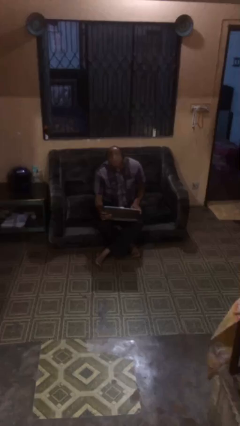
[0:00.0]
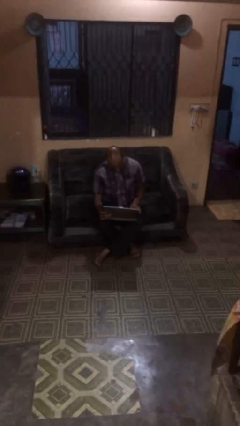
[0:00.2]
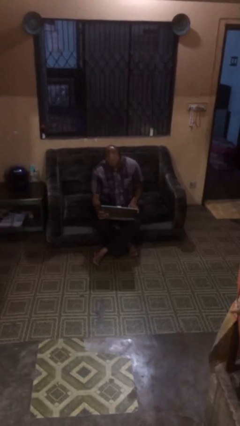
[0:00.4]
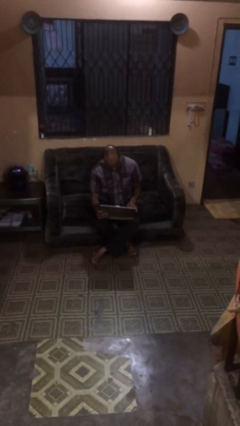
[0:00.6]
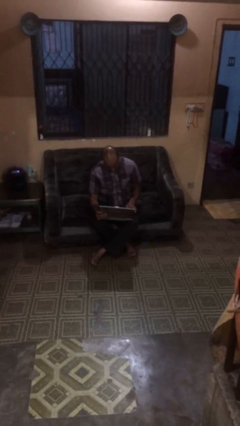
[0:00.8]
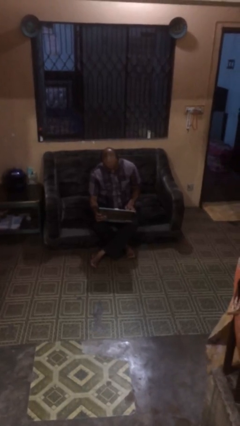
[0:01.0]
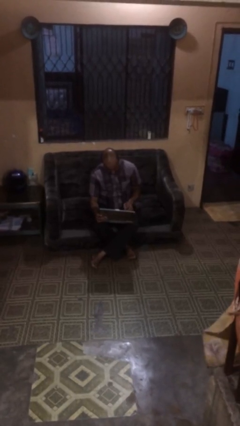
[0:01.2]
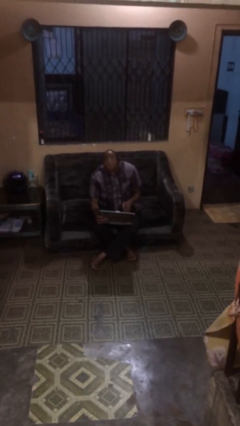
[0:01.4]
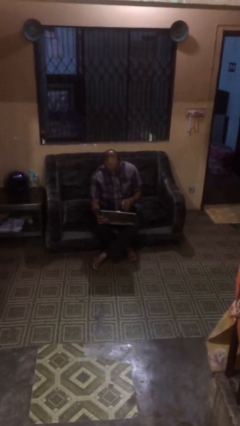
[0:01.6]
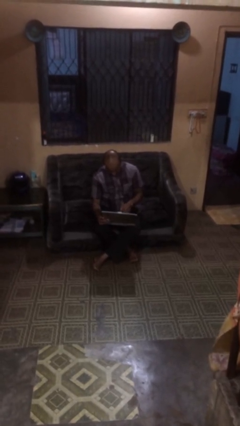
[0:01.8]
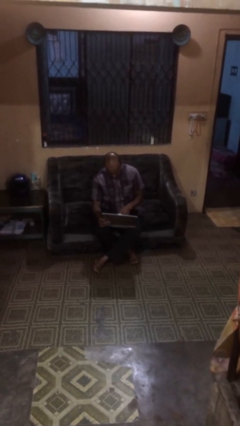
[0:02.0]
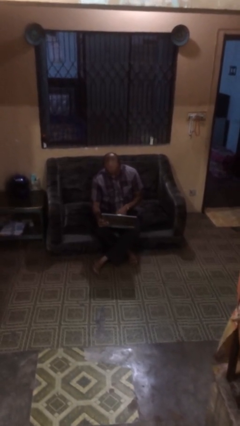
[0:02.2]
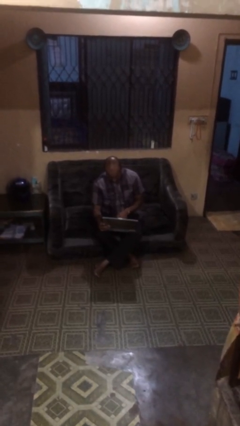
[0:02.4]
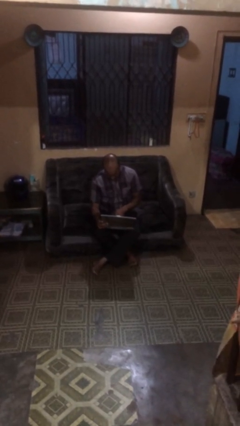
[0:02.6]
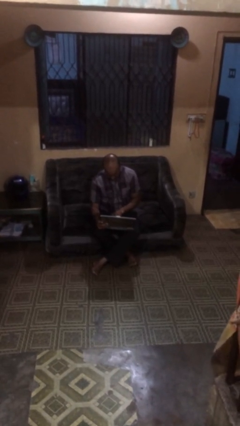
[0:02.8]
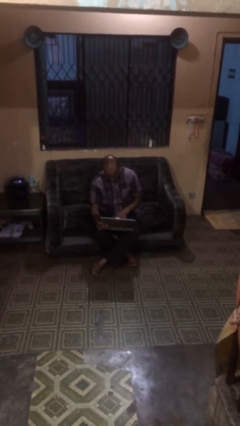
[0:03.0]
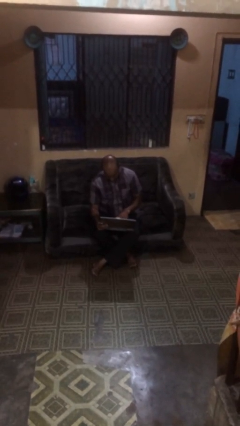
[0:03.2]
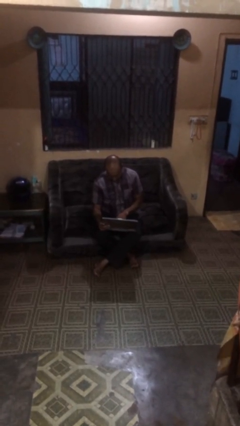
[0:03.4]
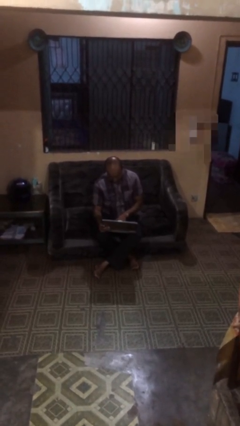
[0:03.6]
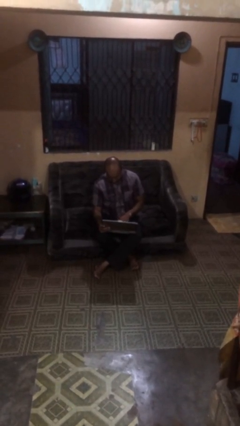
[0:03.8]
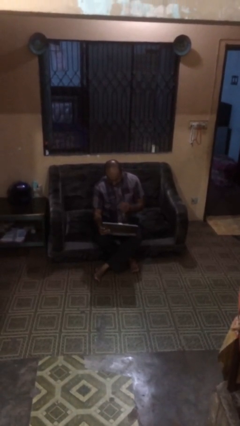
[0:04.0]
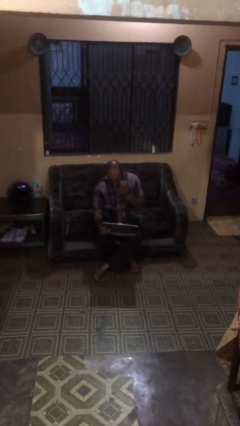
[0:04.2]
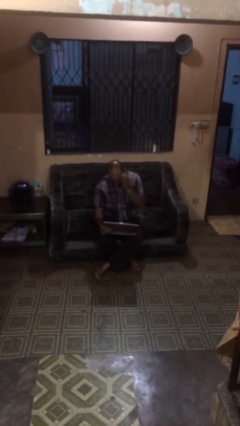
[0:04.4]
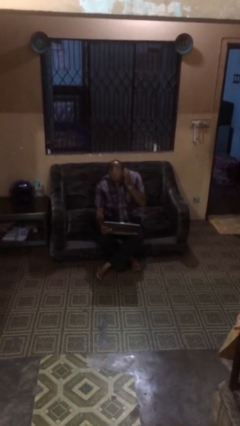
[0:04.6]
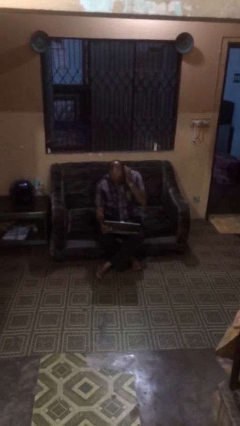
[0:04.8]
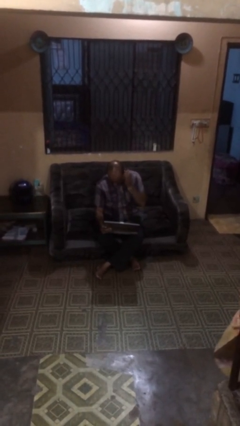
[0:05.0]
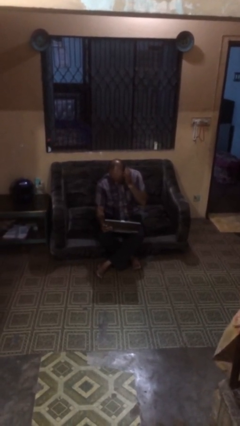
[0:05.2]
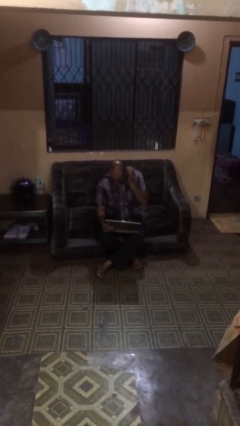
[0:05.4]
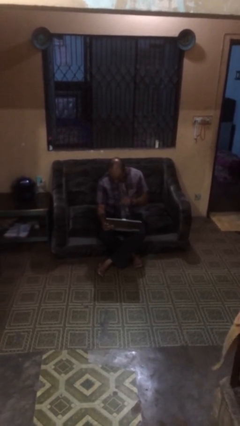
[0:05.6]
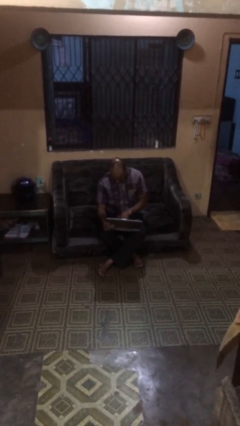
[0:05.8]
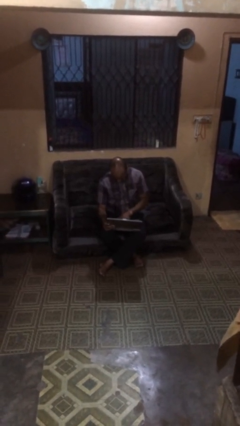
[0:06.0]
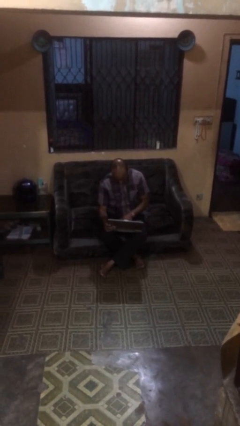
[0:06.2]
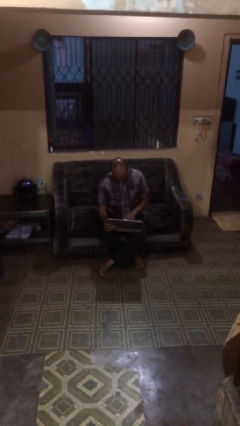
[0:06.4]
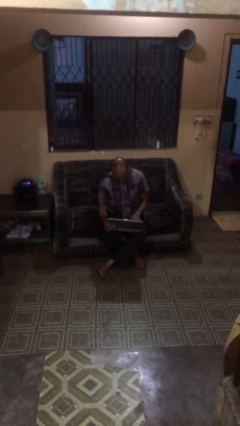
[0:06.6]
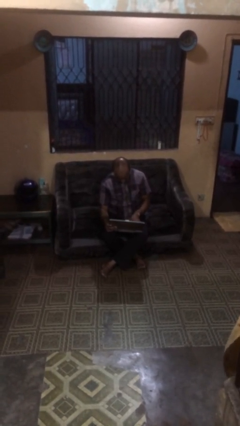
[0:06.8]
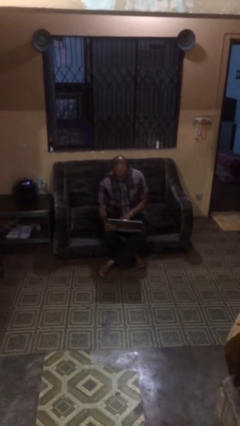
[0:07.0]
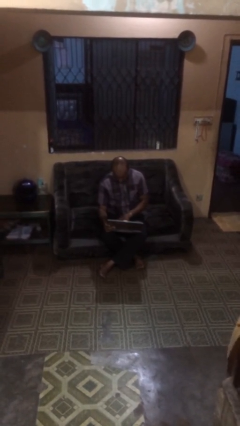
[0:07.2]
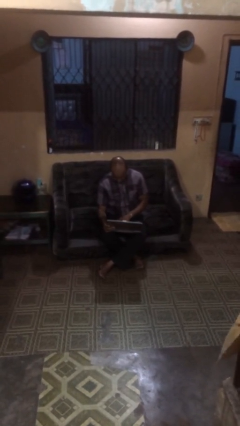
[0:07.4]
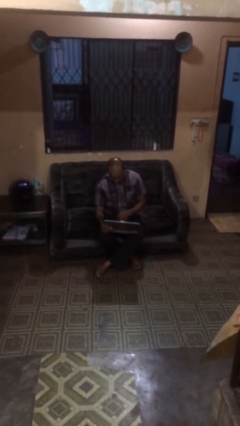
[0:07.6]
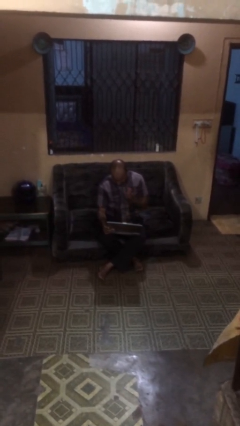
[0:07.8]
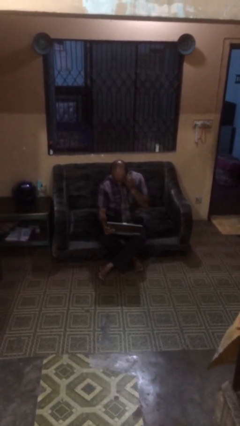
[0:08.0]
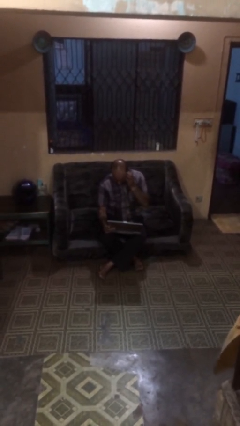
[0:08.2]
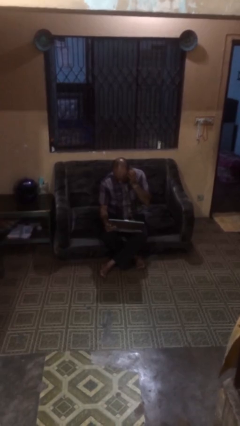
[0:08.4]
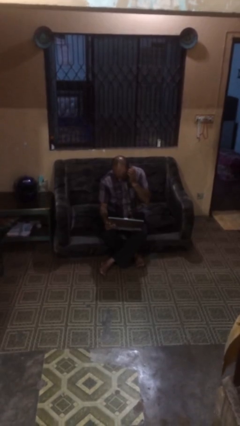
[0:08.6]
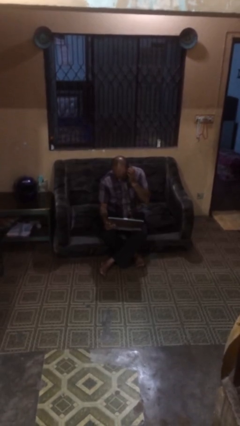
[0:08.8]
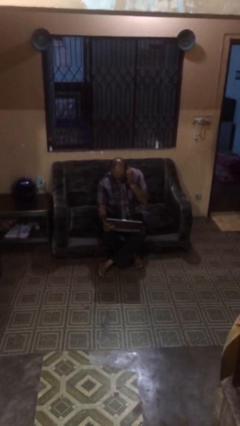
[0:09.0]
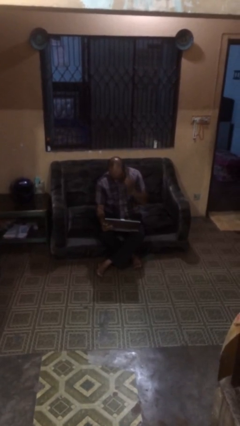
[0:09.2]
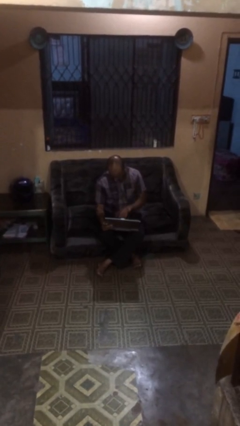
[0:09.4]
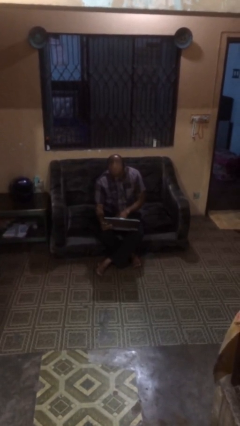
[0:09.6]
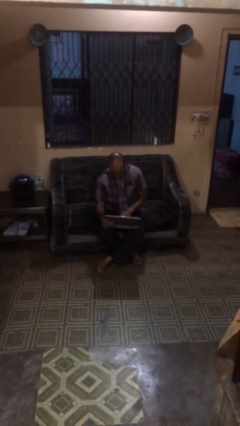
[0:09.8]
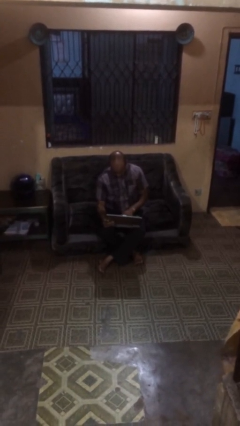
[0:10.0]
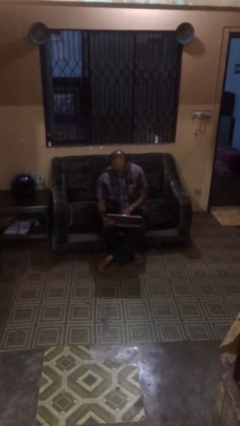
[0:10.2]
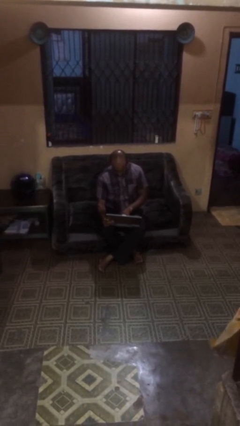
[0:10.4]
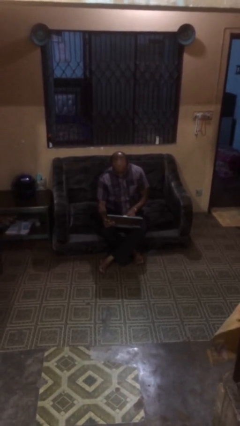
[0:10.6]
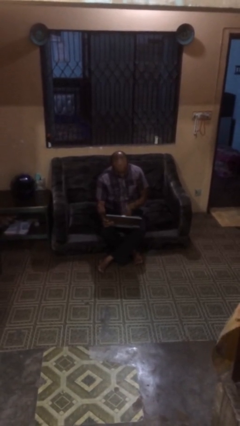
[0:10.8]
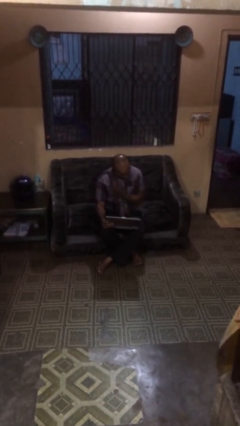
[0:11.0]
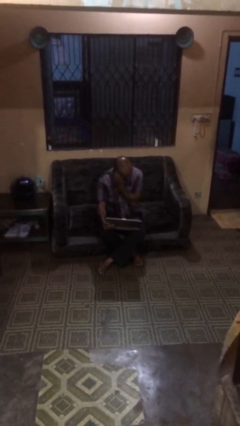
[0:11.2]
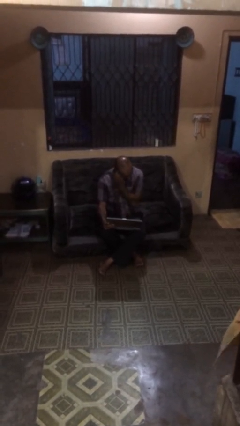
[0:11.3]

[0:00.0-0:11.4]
person interacts with laptop

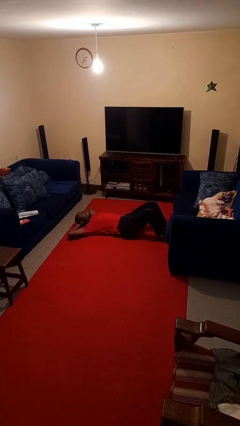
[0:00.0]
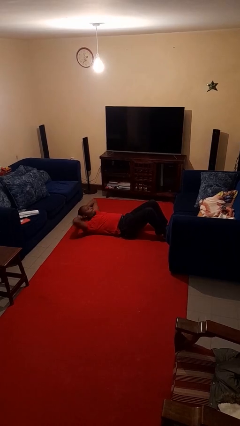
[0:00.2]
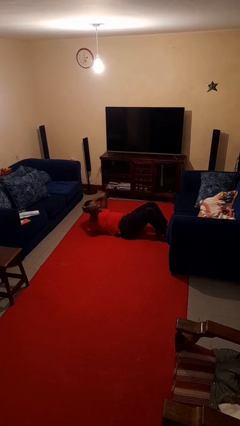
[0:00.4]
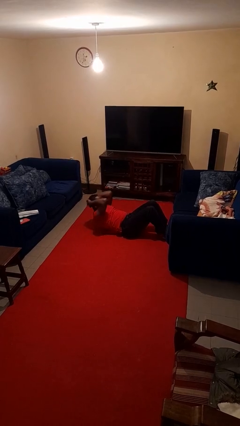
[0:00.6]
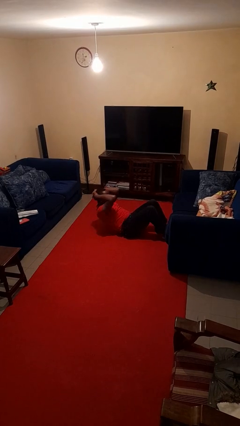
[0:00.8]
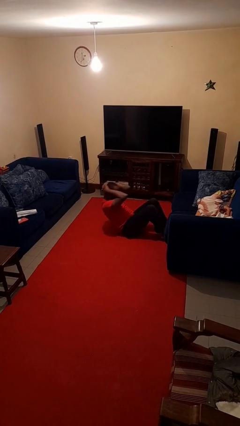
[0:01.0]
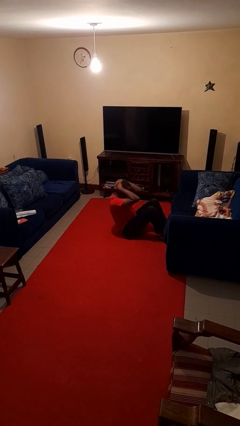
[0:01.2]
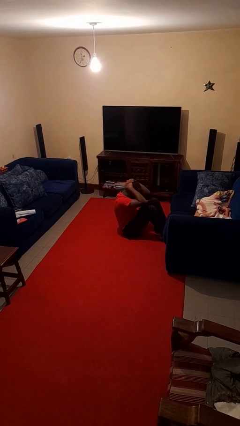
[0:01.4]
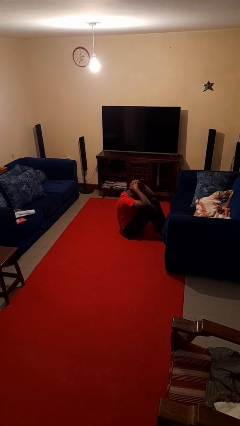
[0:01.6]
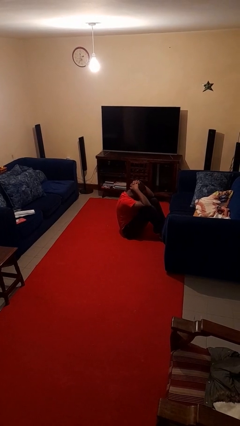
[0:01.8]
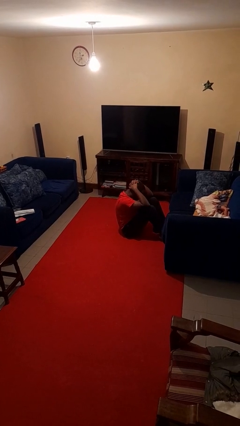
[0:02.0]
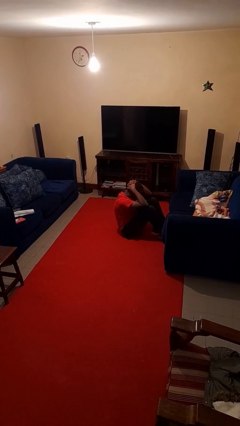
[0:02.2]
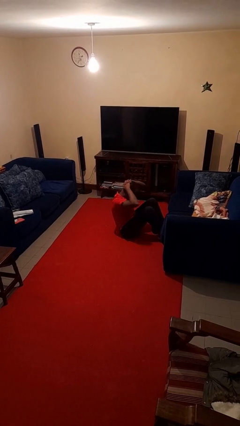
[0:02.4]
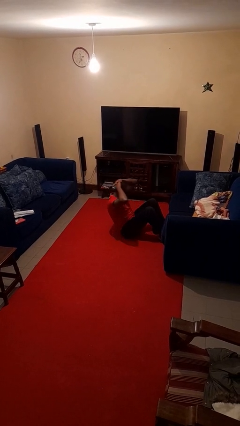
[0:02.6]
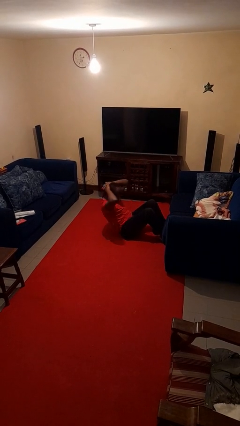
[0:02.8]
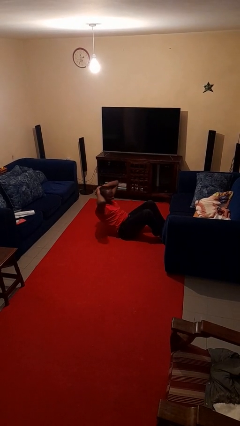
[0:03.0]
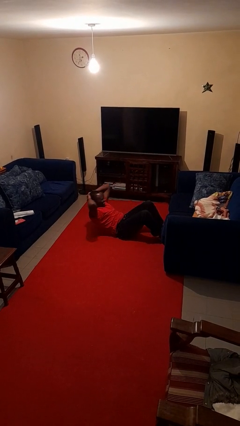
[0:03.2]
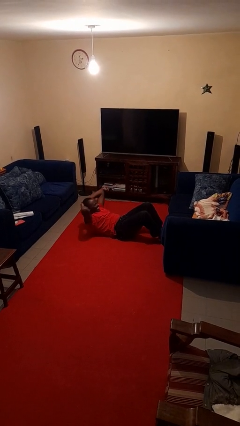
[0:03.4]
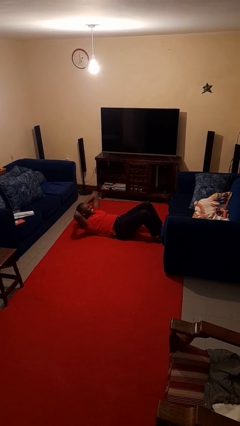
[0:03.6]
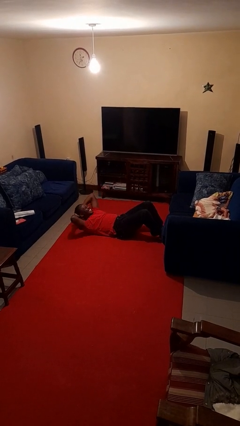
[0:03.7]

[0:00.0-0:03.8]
person exercises with situp

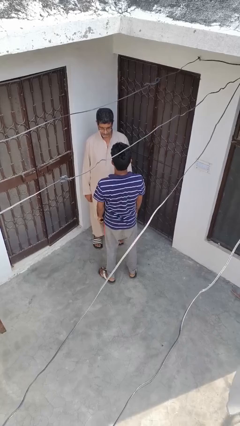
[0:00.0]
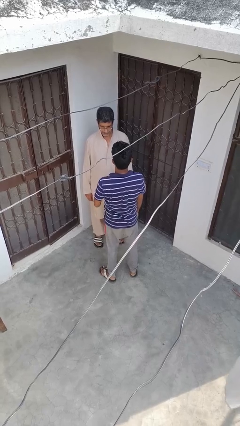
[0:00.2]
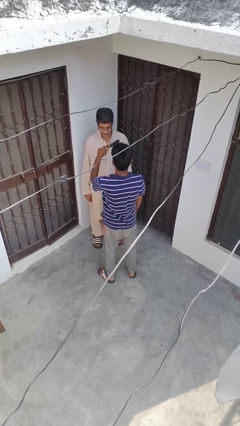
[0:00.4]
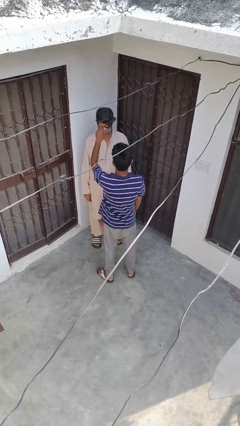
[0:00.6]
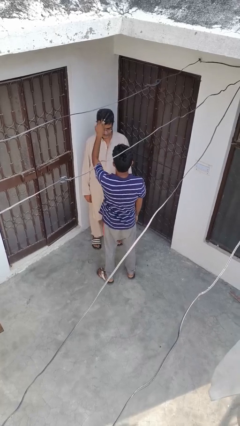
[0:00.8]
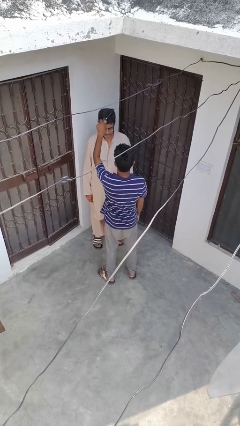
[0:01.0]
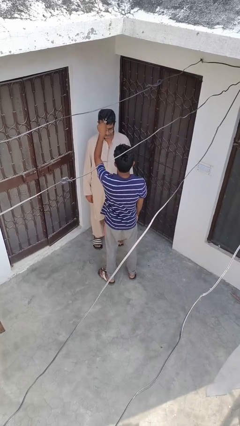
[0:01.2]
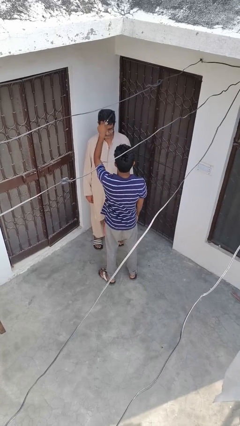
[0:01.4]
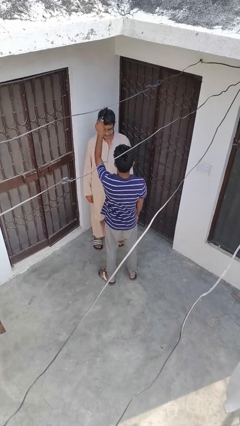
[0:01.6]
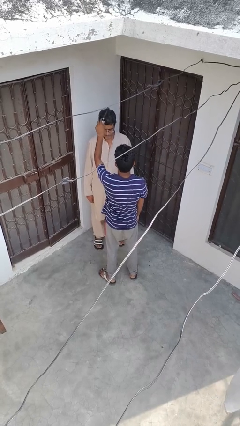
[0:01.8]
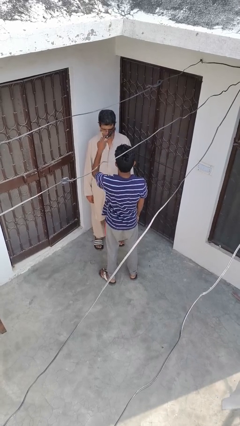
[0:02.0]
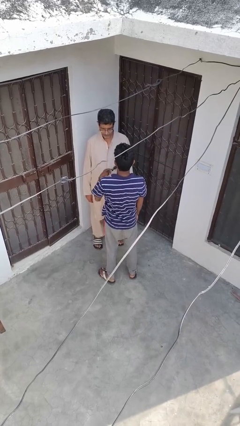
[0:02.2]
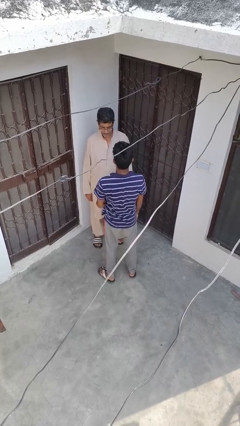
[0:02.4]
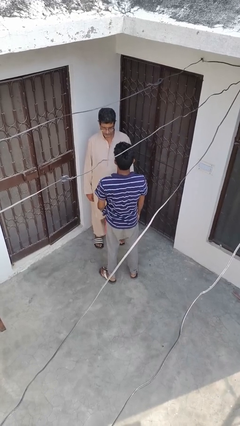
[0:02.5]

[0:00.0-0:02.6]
person brushes hair of person
